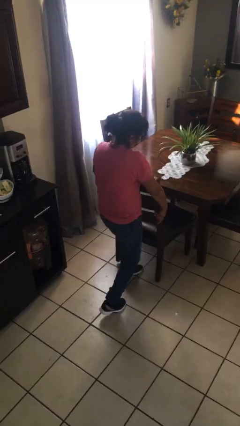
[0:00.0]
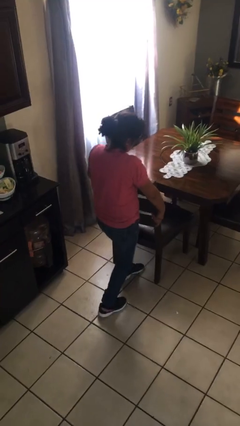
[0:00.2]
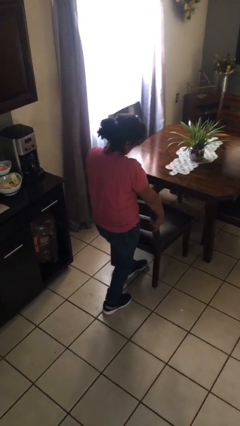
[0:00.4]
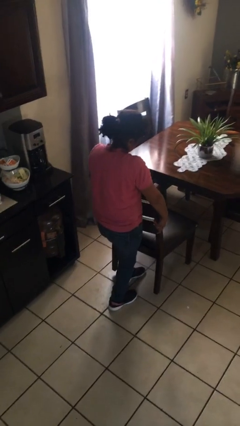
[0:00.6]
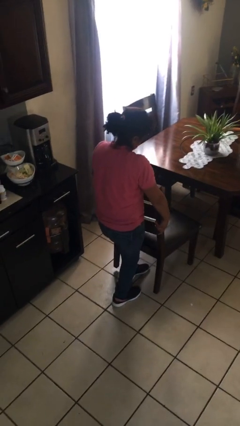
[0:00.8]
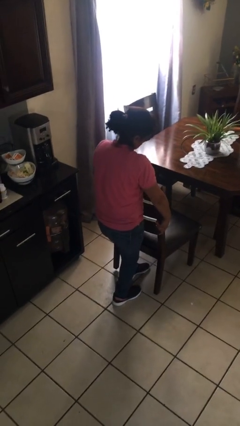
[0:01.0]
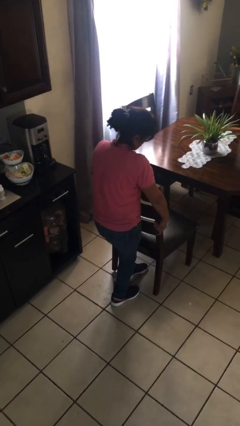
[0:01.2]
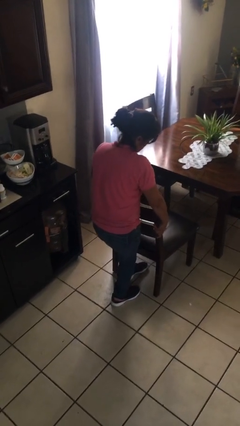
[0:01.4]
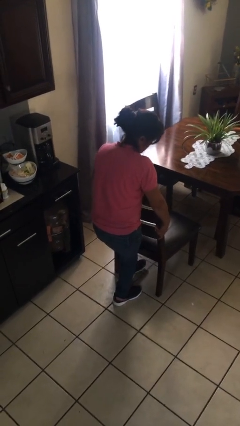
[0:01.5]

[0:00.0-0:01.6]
person pulls out chair

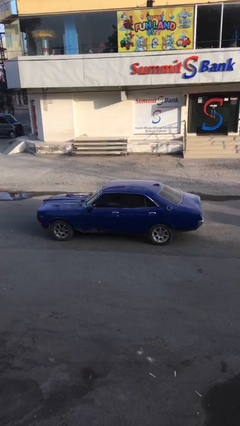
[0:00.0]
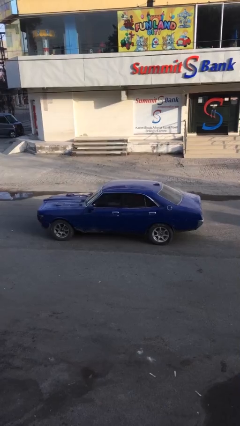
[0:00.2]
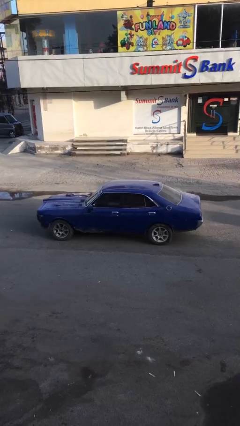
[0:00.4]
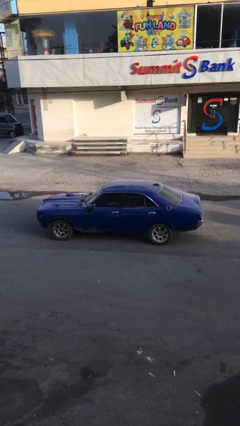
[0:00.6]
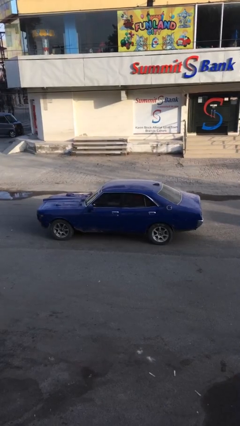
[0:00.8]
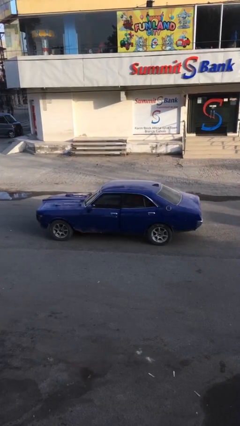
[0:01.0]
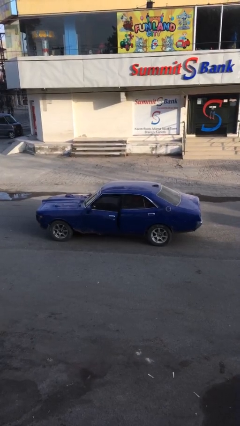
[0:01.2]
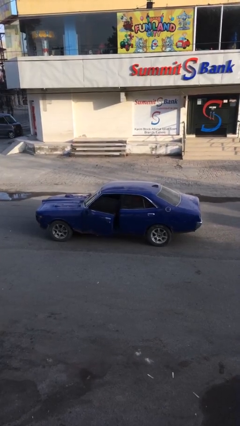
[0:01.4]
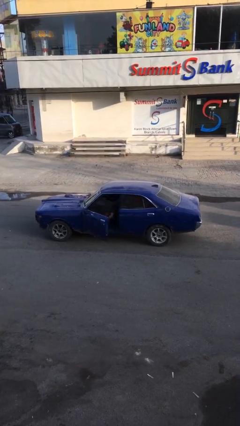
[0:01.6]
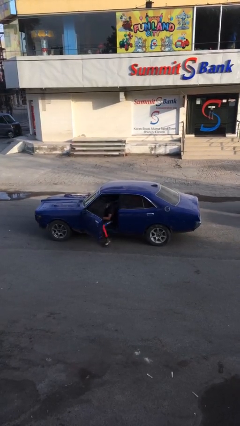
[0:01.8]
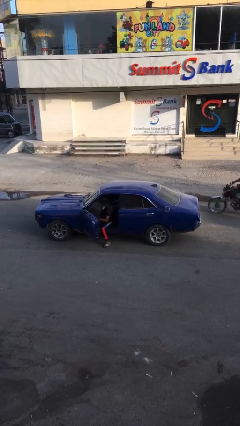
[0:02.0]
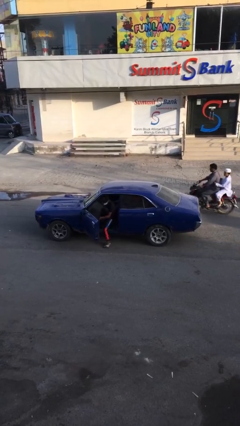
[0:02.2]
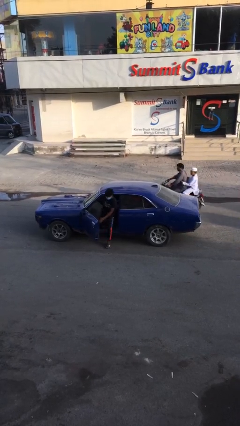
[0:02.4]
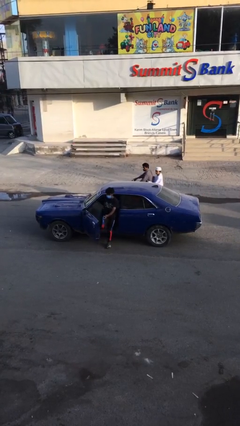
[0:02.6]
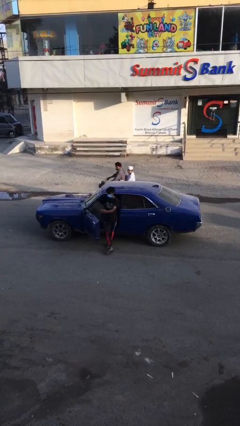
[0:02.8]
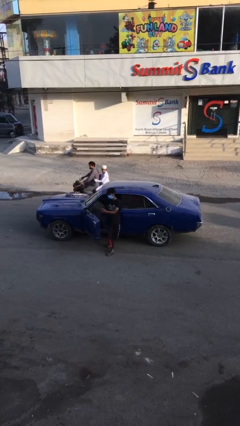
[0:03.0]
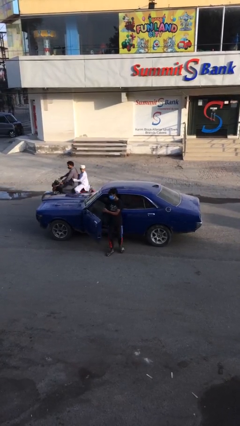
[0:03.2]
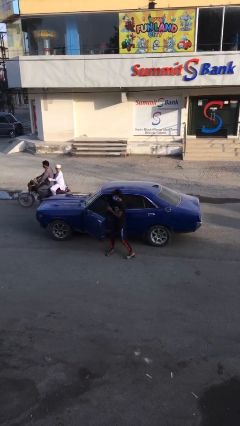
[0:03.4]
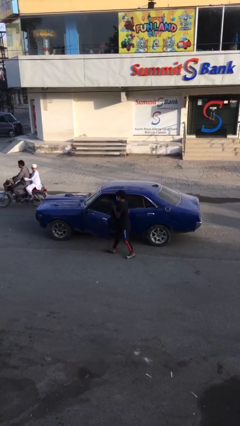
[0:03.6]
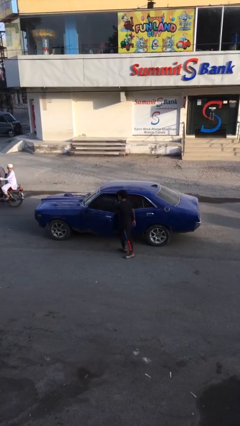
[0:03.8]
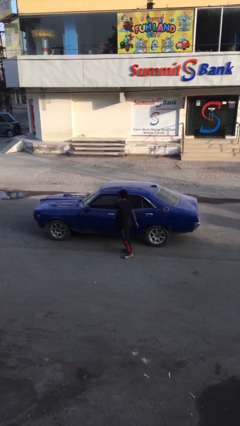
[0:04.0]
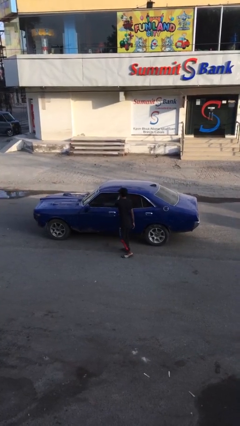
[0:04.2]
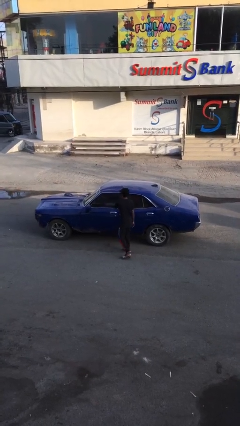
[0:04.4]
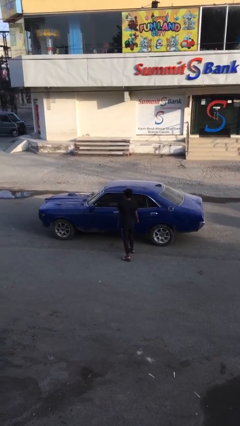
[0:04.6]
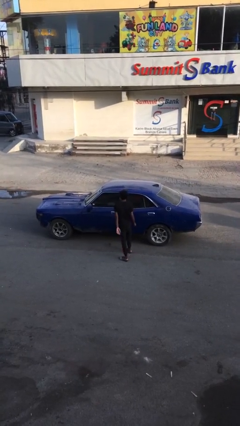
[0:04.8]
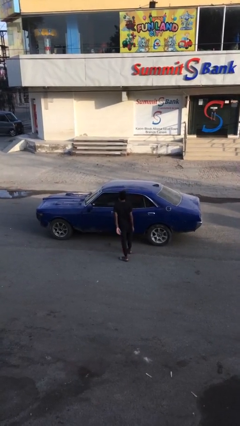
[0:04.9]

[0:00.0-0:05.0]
car drops off person

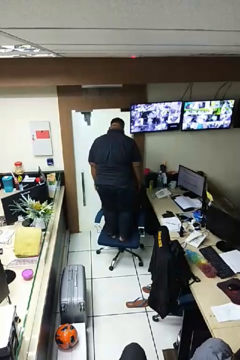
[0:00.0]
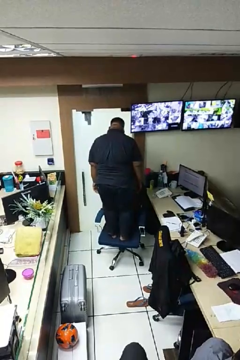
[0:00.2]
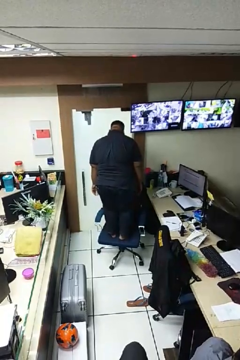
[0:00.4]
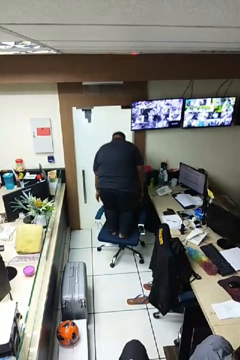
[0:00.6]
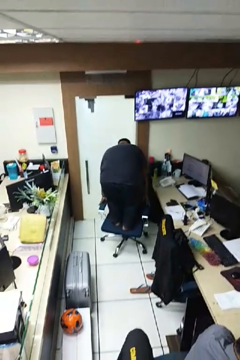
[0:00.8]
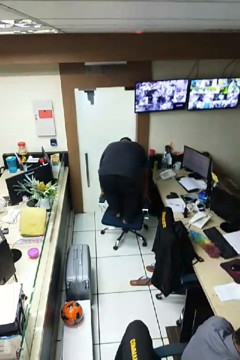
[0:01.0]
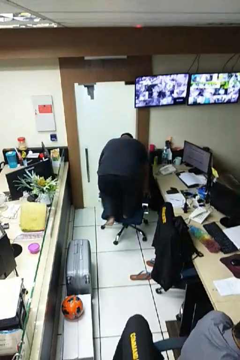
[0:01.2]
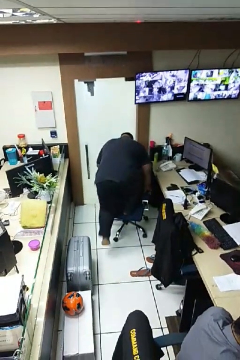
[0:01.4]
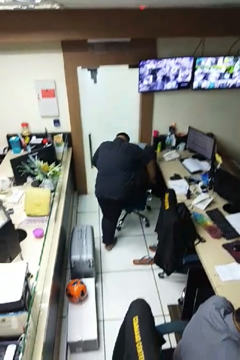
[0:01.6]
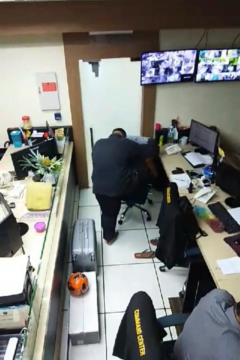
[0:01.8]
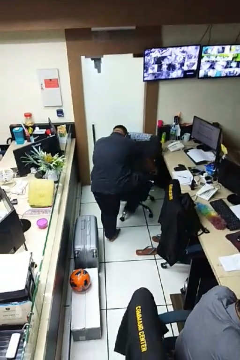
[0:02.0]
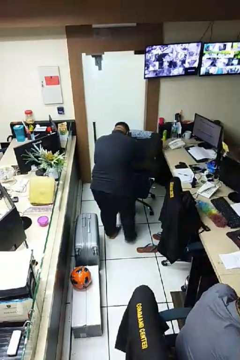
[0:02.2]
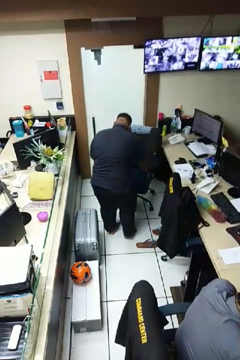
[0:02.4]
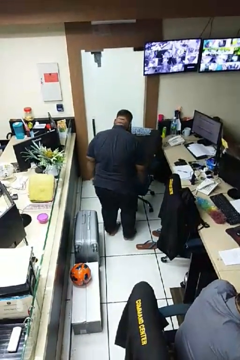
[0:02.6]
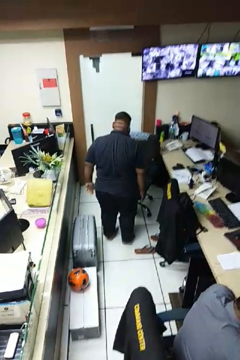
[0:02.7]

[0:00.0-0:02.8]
person climbs off chair

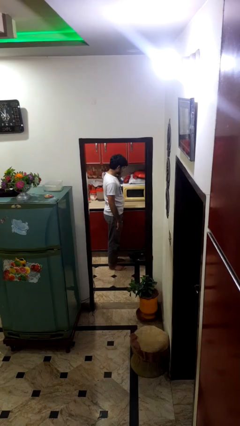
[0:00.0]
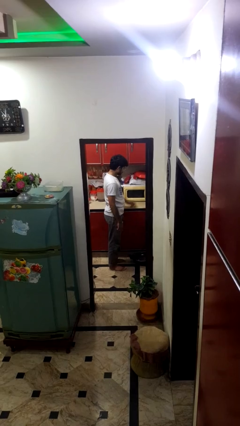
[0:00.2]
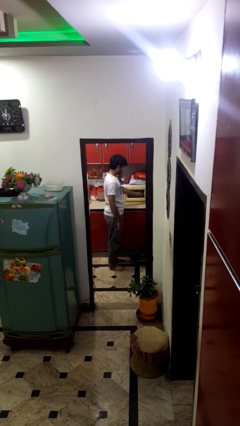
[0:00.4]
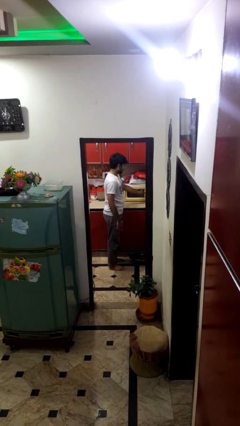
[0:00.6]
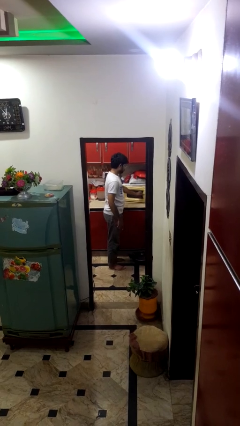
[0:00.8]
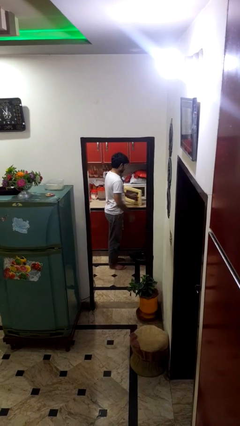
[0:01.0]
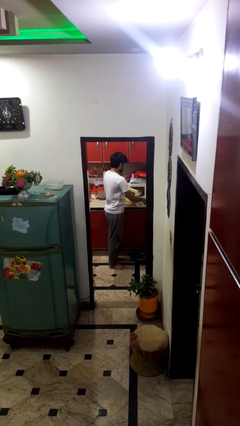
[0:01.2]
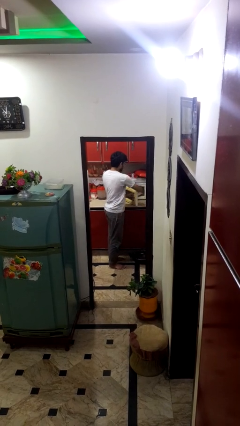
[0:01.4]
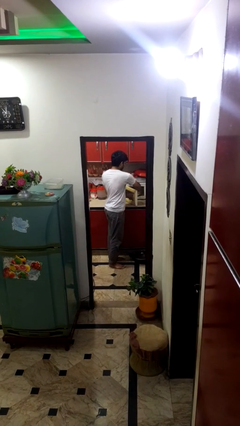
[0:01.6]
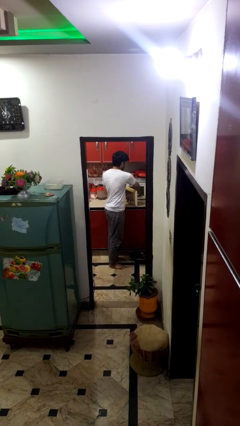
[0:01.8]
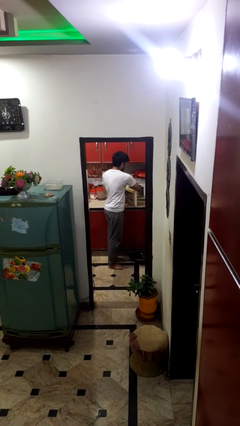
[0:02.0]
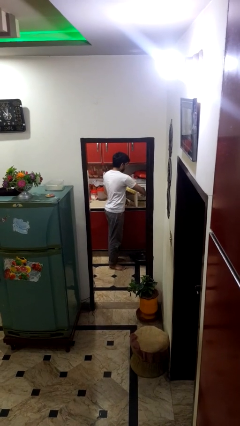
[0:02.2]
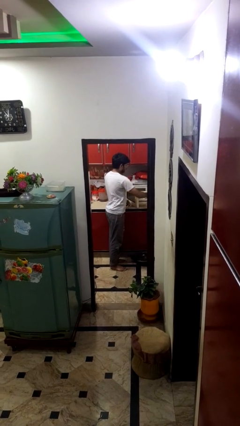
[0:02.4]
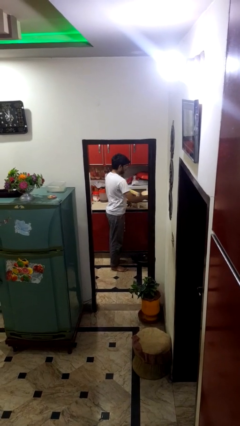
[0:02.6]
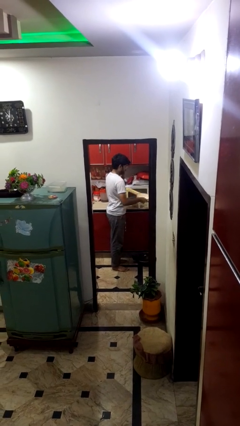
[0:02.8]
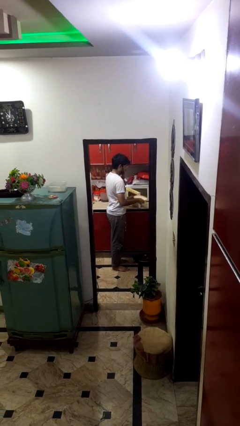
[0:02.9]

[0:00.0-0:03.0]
person takes object from microwave

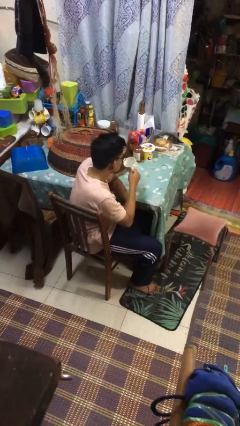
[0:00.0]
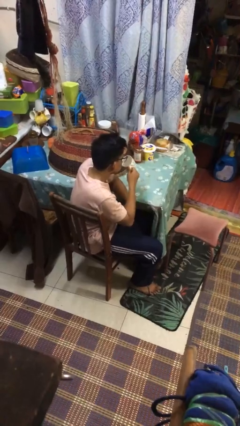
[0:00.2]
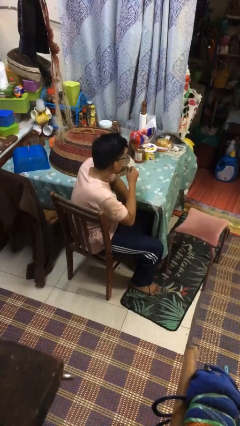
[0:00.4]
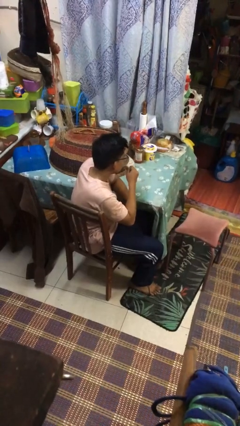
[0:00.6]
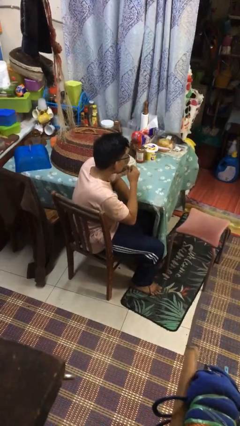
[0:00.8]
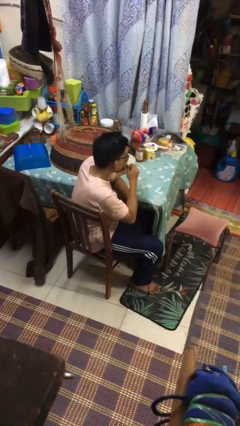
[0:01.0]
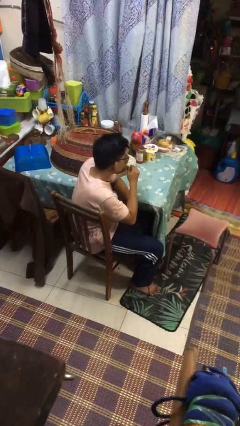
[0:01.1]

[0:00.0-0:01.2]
person drinks from mug

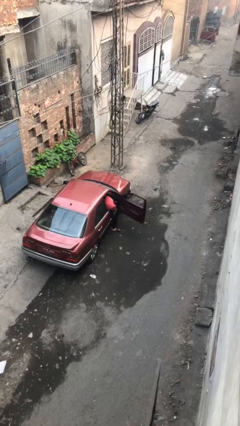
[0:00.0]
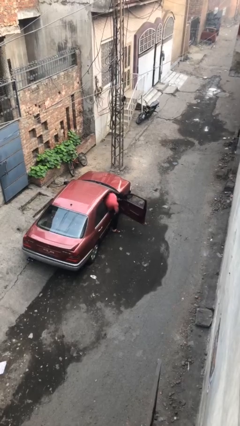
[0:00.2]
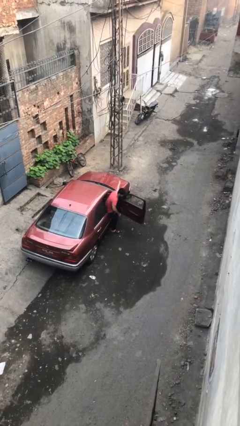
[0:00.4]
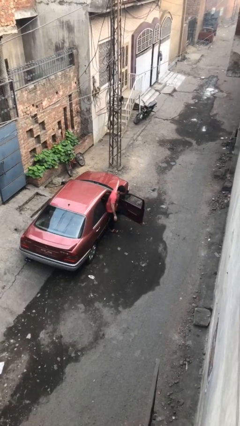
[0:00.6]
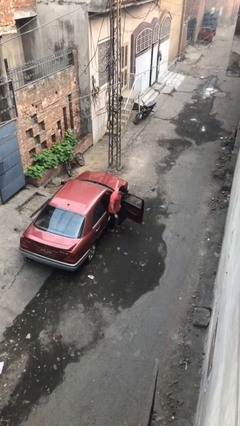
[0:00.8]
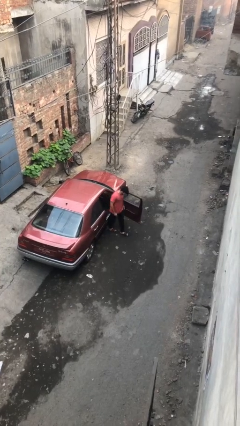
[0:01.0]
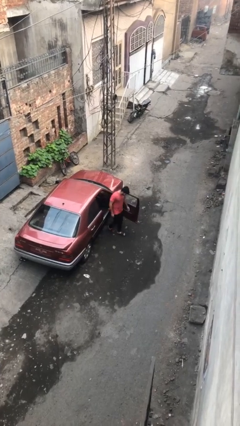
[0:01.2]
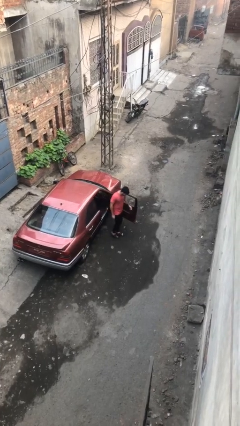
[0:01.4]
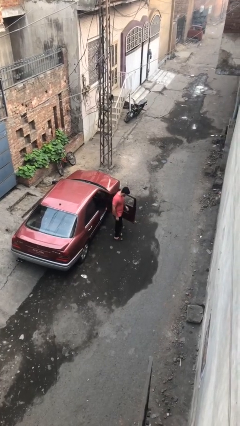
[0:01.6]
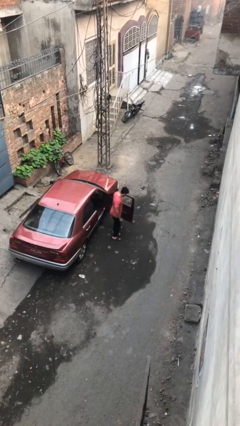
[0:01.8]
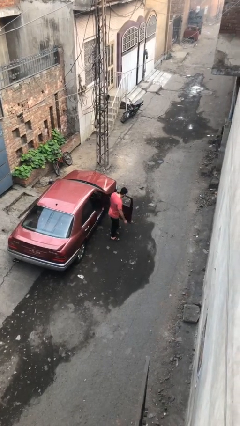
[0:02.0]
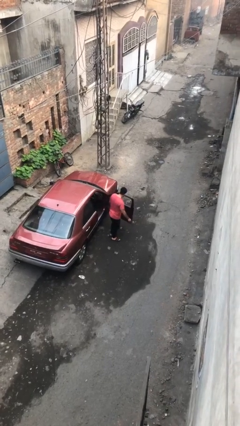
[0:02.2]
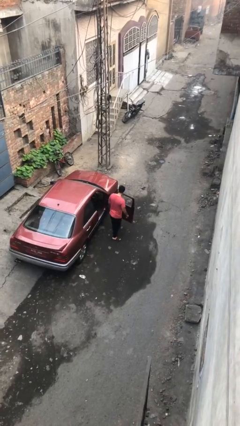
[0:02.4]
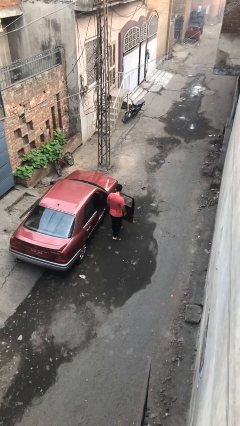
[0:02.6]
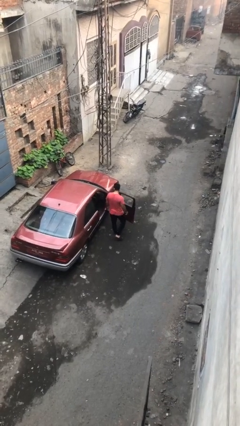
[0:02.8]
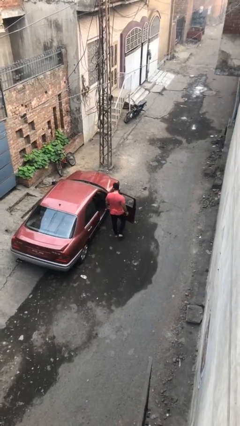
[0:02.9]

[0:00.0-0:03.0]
person exits car

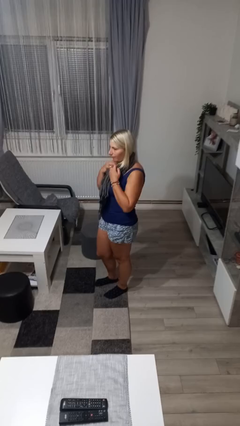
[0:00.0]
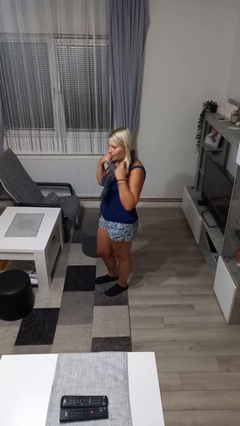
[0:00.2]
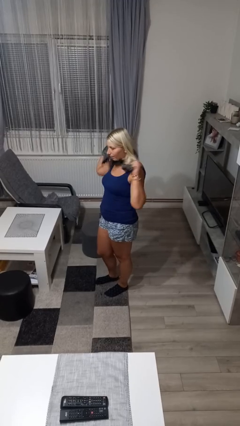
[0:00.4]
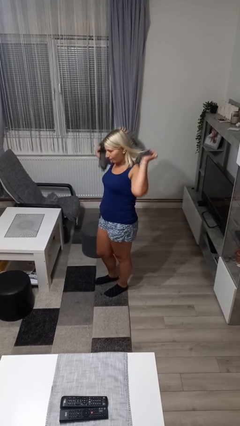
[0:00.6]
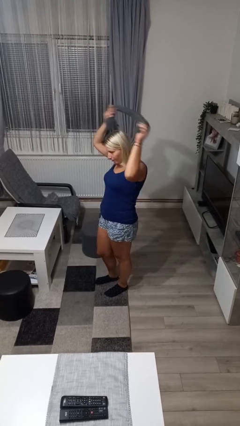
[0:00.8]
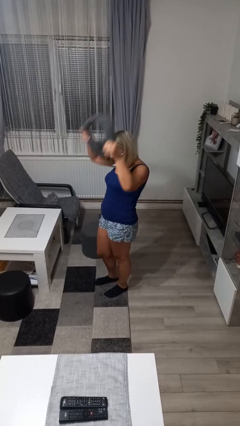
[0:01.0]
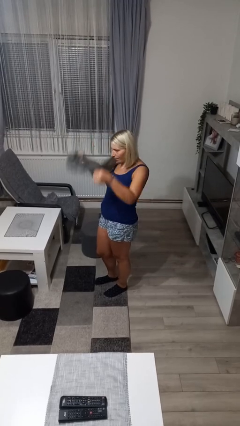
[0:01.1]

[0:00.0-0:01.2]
person takes off scarf
